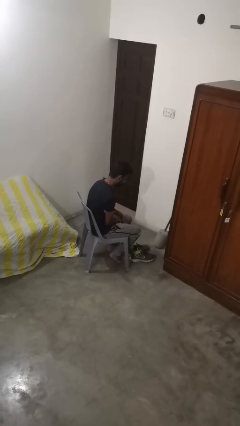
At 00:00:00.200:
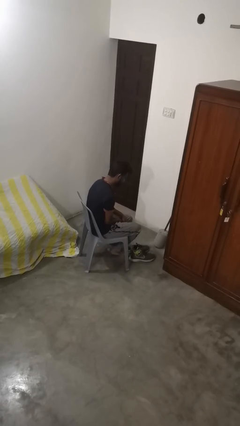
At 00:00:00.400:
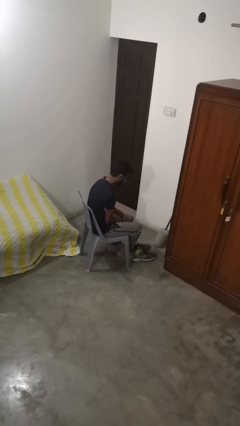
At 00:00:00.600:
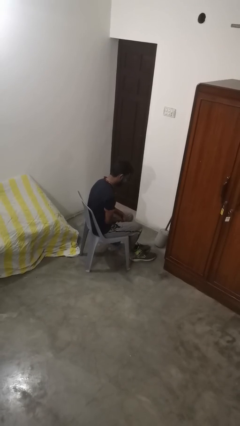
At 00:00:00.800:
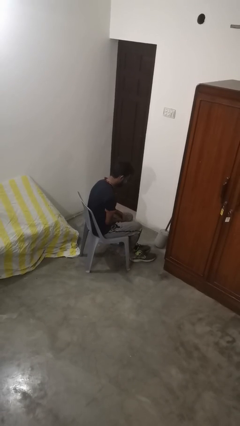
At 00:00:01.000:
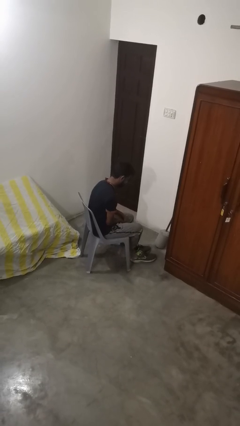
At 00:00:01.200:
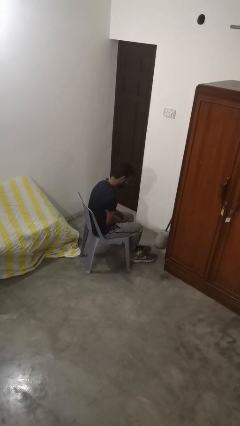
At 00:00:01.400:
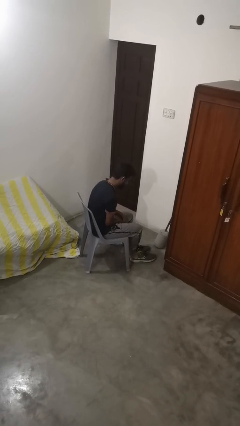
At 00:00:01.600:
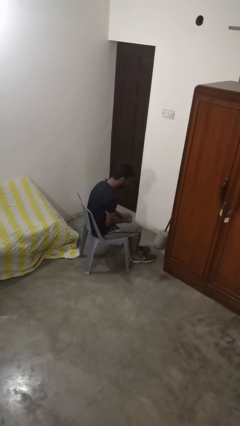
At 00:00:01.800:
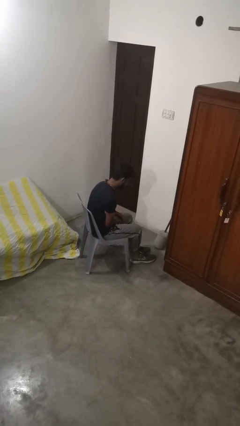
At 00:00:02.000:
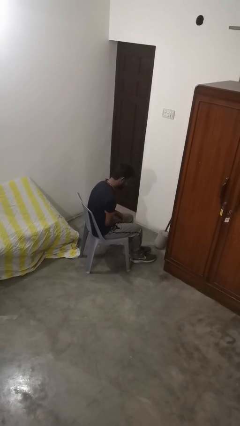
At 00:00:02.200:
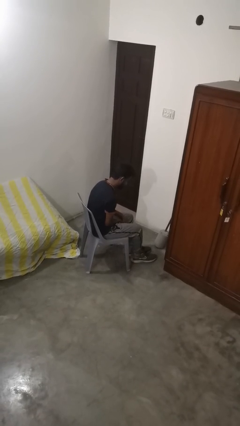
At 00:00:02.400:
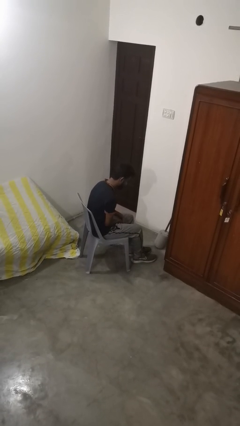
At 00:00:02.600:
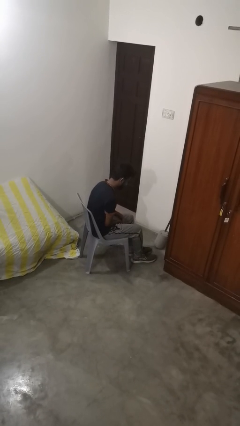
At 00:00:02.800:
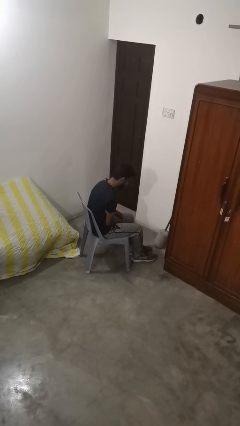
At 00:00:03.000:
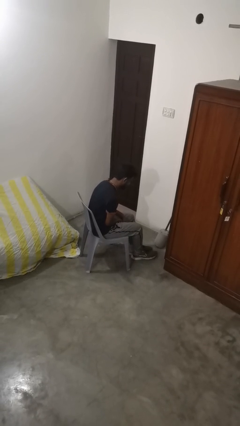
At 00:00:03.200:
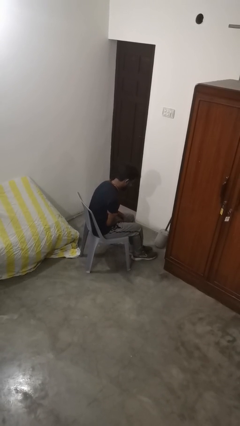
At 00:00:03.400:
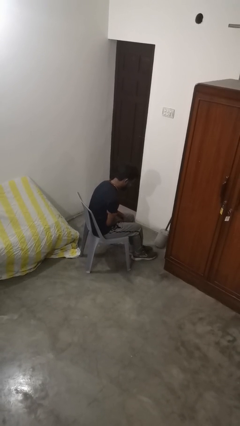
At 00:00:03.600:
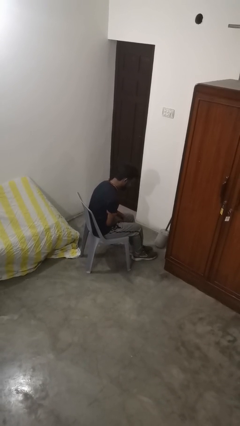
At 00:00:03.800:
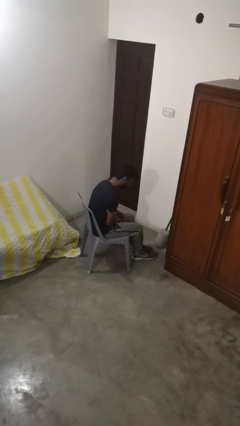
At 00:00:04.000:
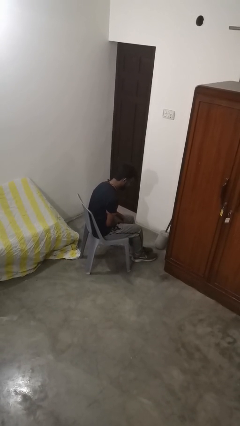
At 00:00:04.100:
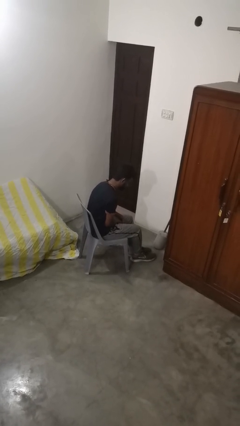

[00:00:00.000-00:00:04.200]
person puts on shoes

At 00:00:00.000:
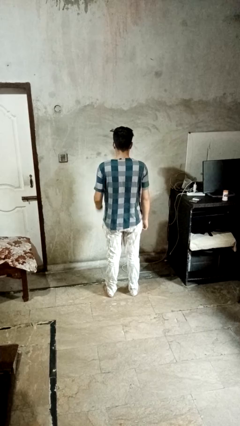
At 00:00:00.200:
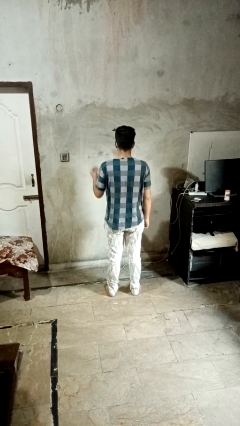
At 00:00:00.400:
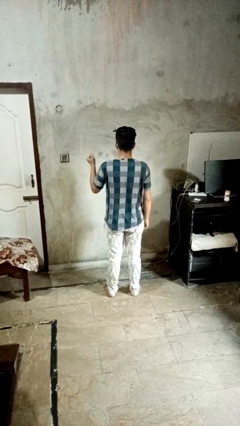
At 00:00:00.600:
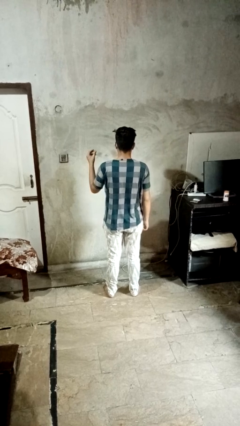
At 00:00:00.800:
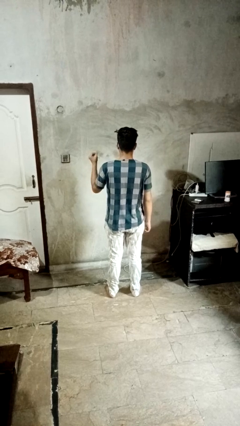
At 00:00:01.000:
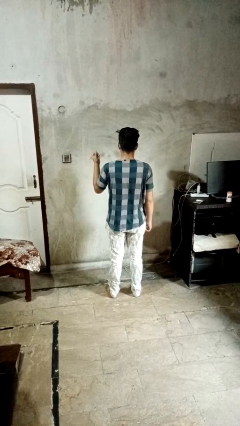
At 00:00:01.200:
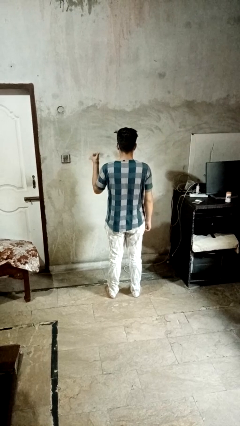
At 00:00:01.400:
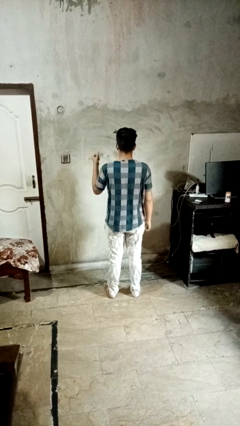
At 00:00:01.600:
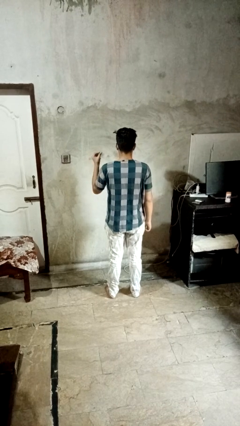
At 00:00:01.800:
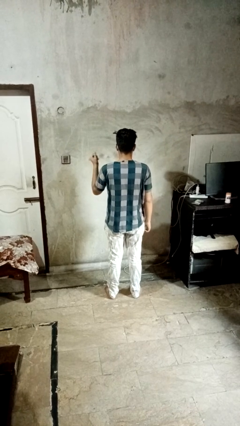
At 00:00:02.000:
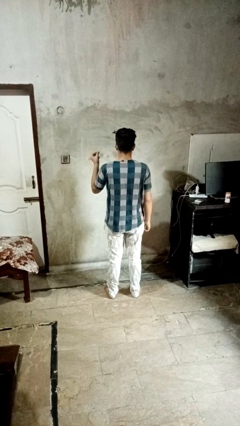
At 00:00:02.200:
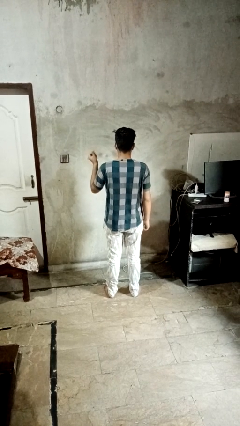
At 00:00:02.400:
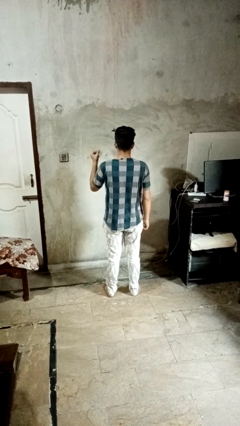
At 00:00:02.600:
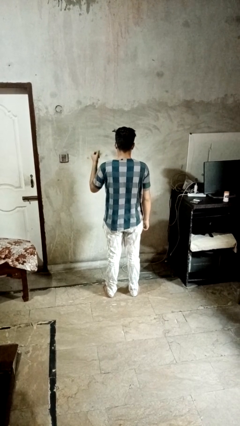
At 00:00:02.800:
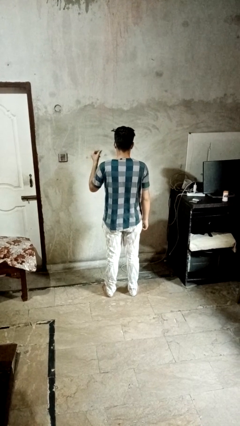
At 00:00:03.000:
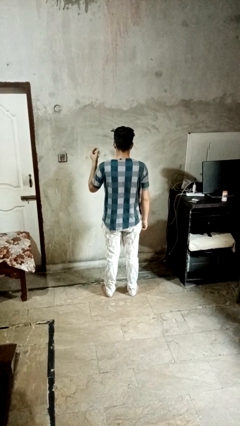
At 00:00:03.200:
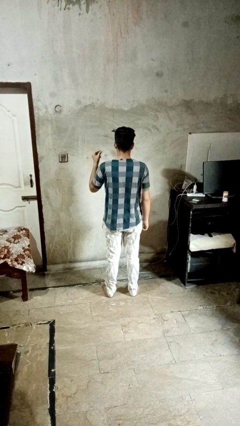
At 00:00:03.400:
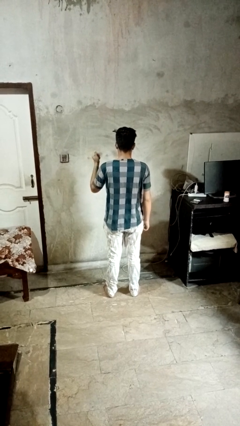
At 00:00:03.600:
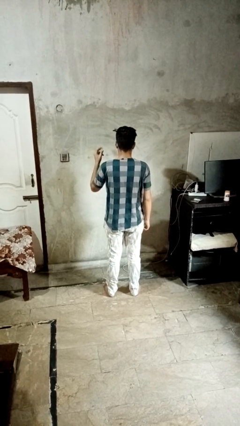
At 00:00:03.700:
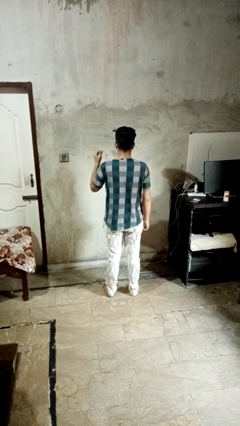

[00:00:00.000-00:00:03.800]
person snaps fingers

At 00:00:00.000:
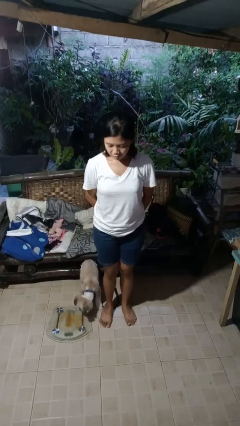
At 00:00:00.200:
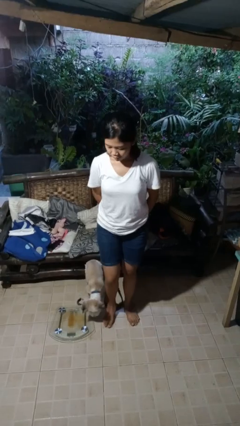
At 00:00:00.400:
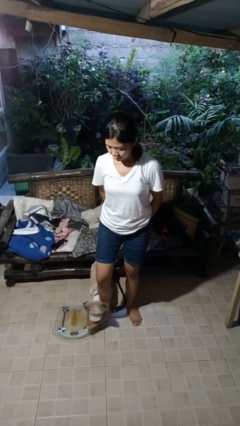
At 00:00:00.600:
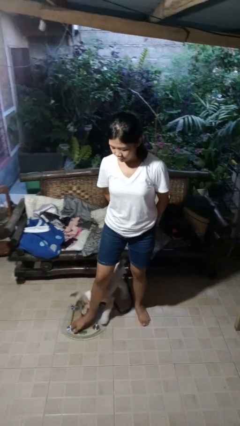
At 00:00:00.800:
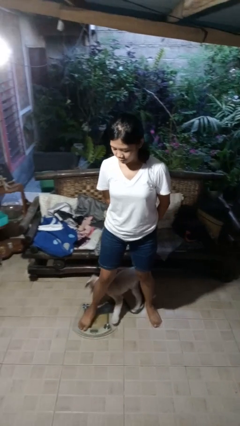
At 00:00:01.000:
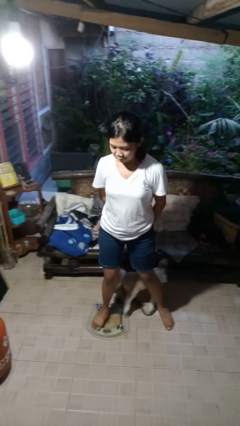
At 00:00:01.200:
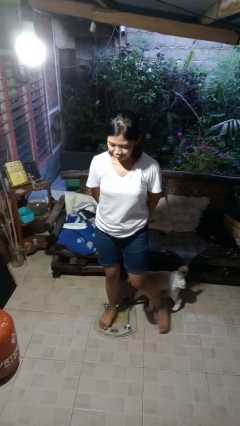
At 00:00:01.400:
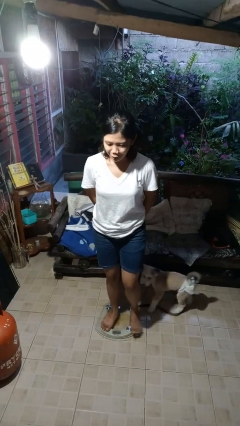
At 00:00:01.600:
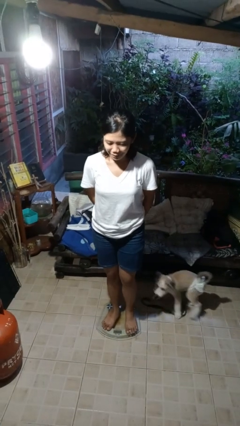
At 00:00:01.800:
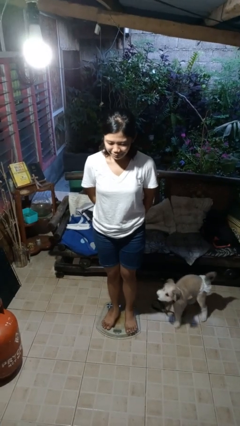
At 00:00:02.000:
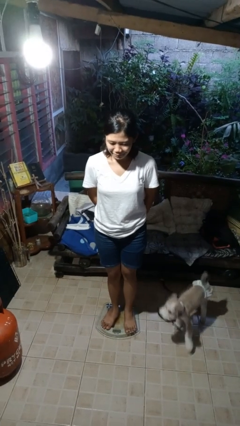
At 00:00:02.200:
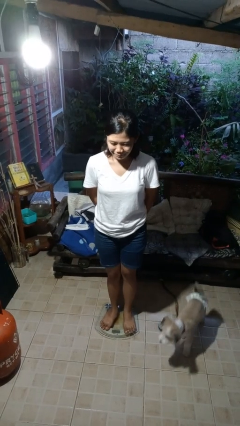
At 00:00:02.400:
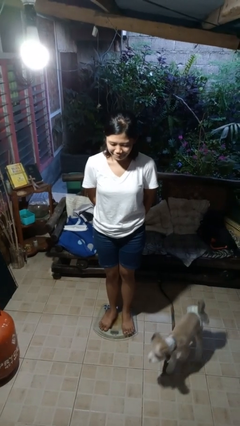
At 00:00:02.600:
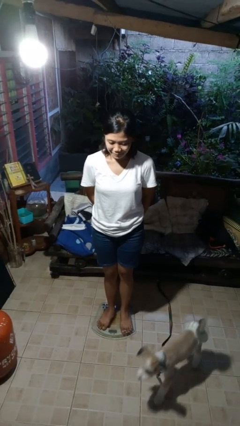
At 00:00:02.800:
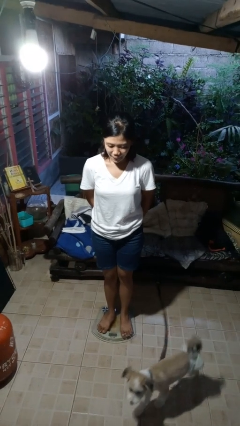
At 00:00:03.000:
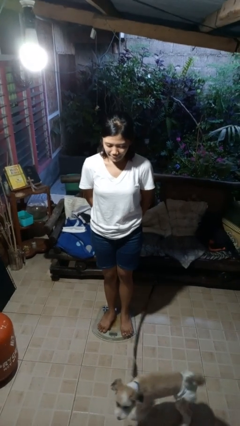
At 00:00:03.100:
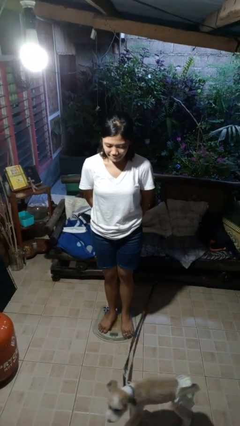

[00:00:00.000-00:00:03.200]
person uses bodyweight scale

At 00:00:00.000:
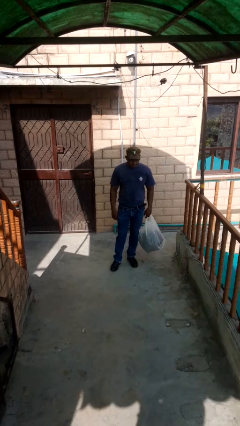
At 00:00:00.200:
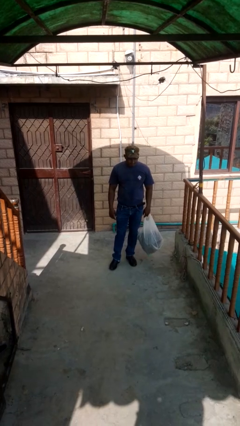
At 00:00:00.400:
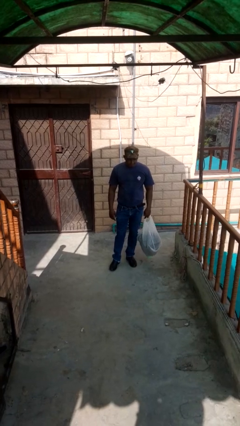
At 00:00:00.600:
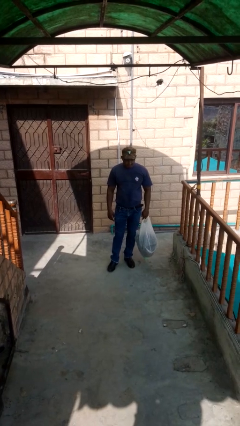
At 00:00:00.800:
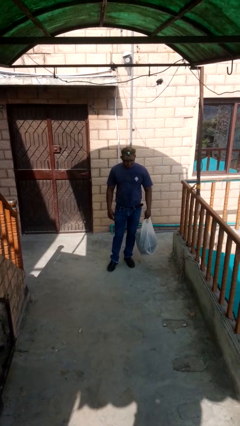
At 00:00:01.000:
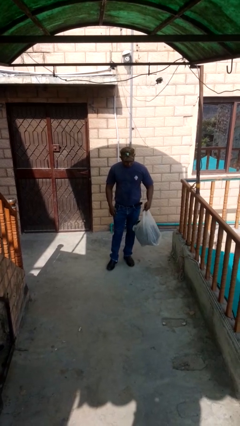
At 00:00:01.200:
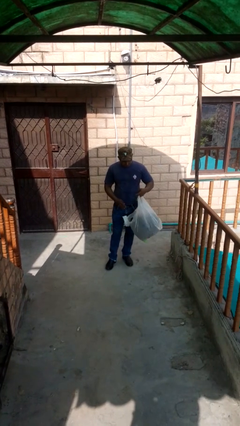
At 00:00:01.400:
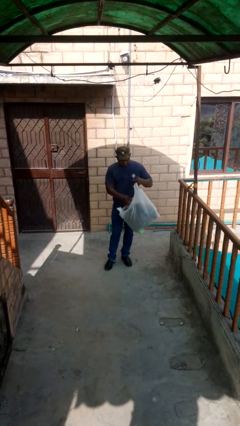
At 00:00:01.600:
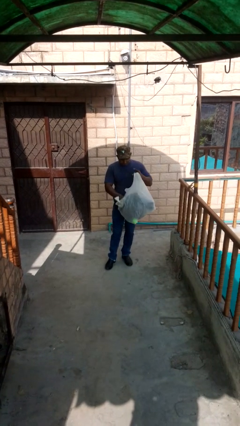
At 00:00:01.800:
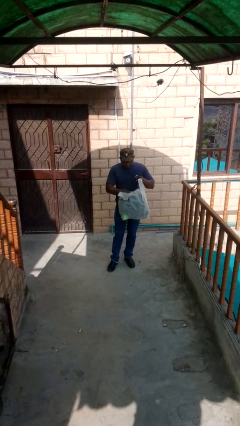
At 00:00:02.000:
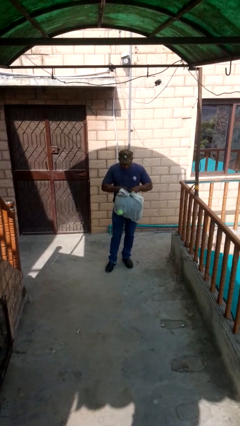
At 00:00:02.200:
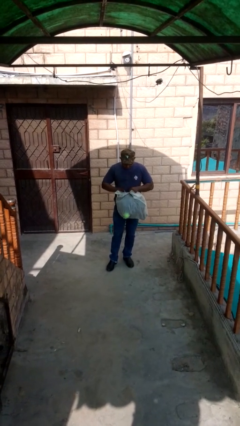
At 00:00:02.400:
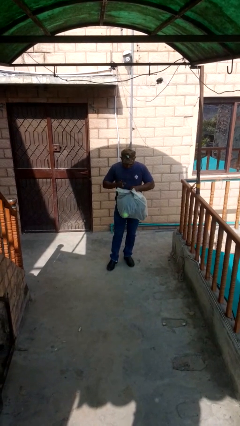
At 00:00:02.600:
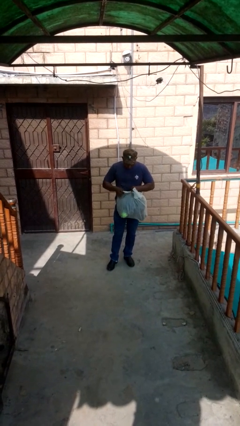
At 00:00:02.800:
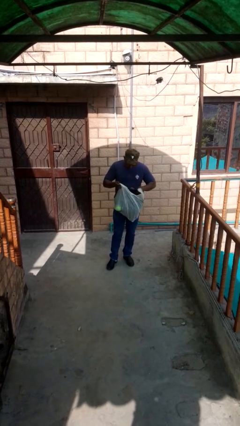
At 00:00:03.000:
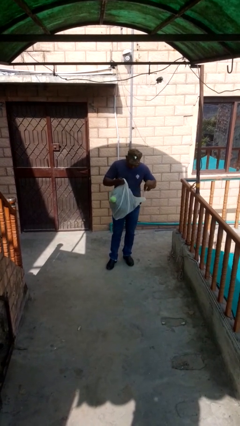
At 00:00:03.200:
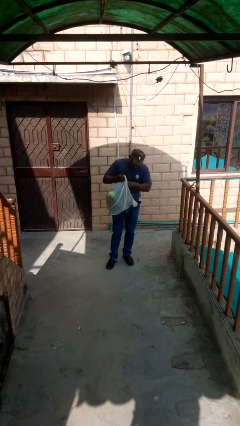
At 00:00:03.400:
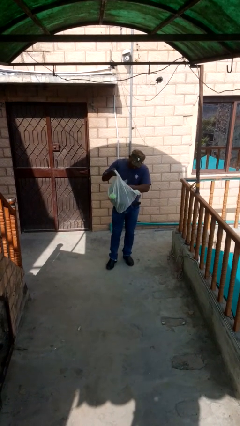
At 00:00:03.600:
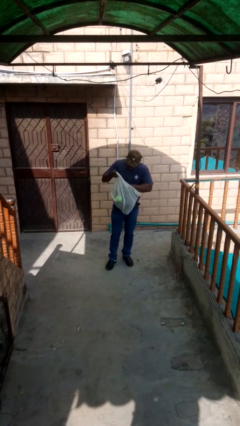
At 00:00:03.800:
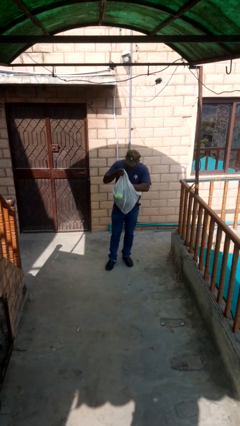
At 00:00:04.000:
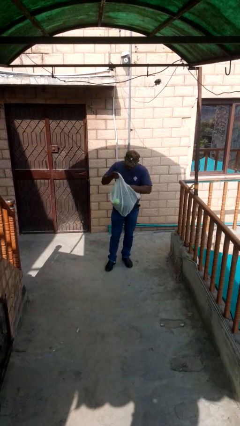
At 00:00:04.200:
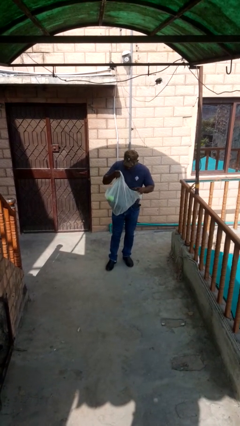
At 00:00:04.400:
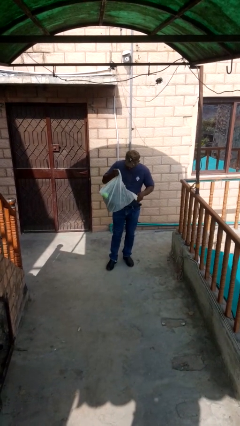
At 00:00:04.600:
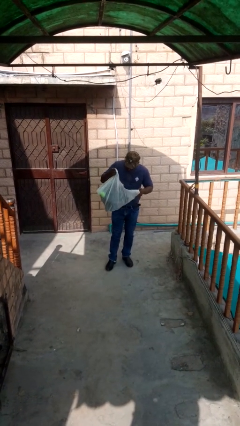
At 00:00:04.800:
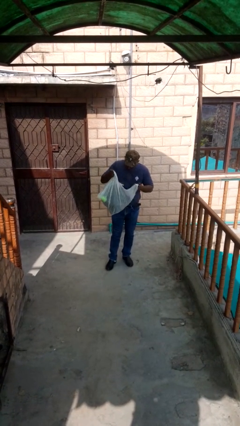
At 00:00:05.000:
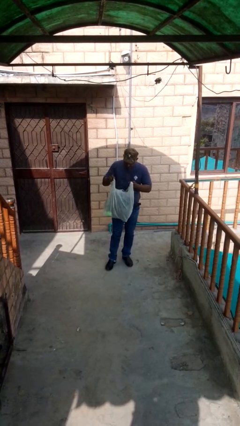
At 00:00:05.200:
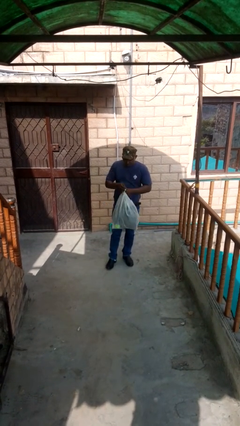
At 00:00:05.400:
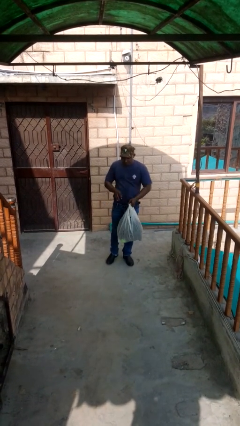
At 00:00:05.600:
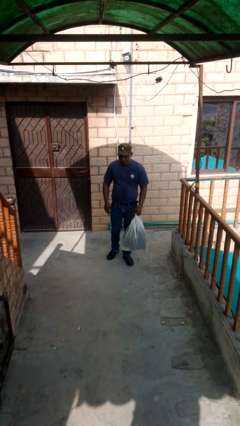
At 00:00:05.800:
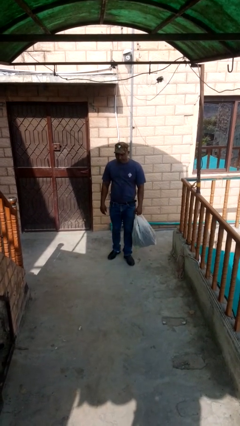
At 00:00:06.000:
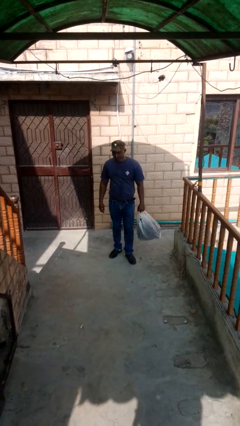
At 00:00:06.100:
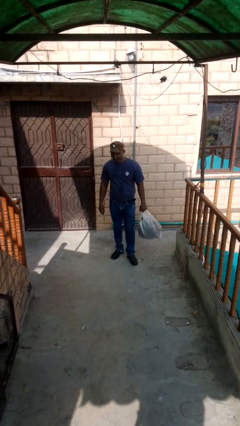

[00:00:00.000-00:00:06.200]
person searches in bag
